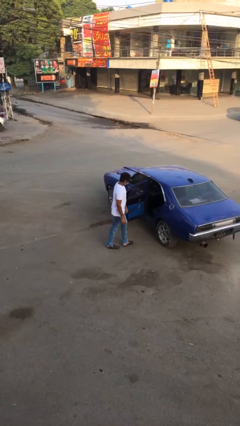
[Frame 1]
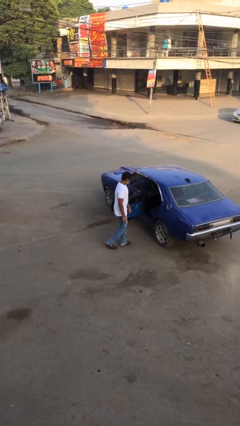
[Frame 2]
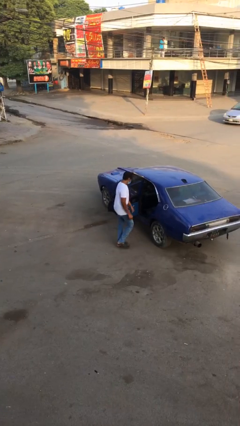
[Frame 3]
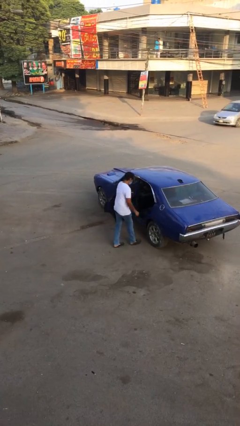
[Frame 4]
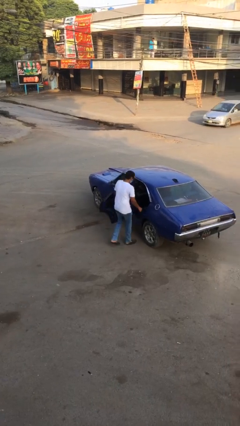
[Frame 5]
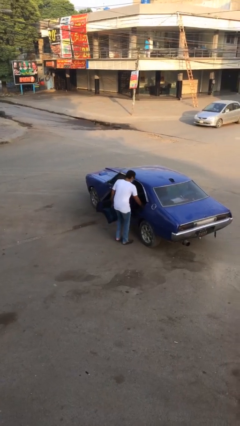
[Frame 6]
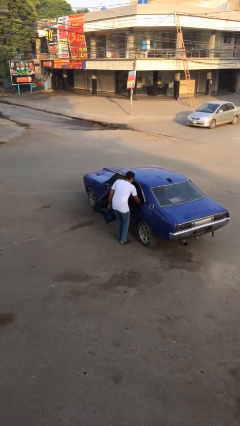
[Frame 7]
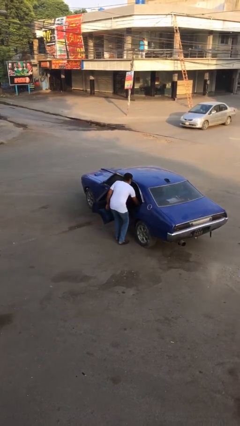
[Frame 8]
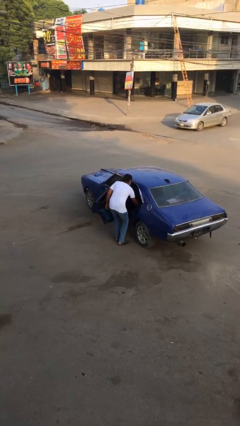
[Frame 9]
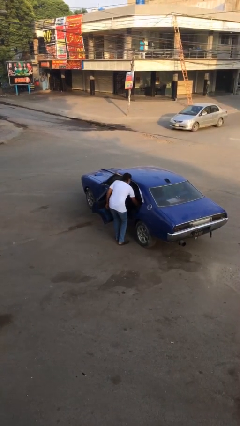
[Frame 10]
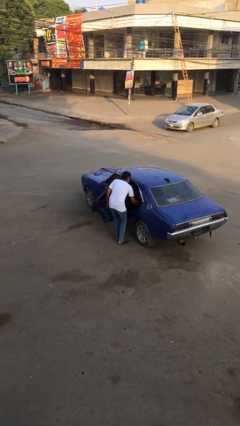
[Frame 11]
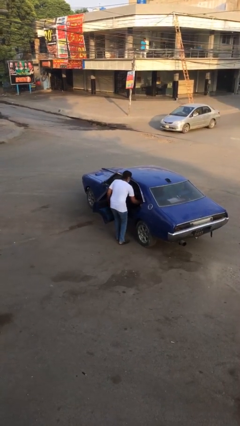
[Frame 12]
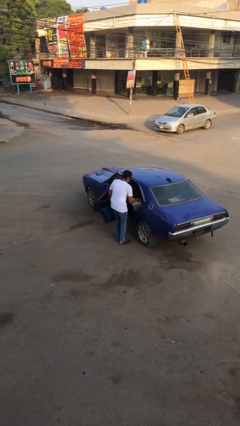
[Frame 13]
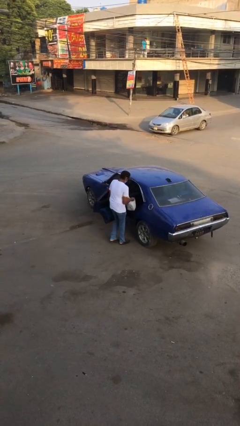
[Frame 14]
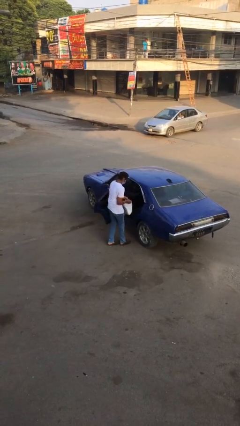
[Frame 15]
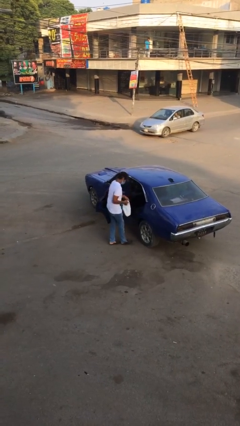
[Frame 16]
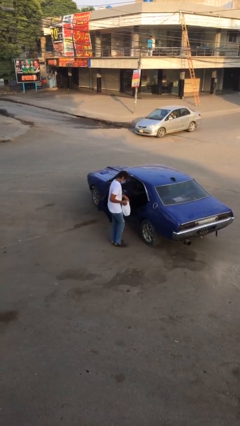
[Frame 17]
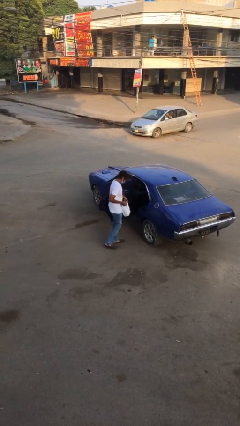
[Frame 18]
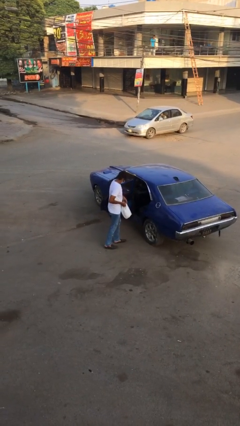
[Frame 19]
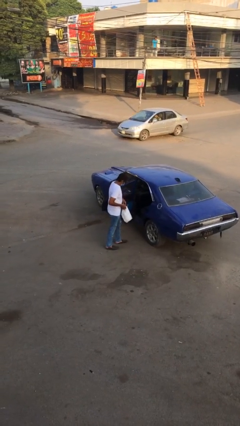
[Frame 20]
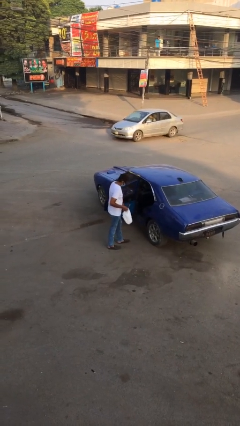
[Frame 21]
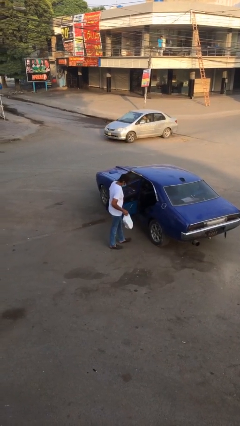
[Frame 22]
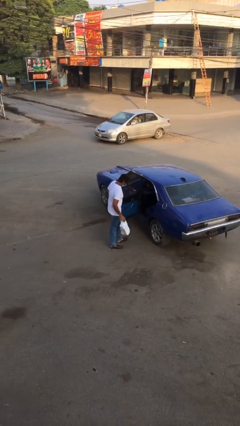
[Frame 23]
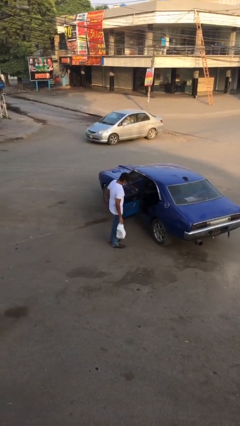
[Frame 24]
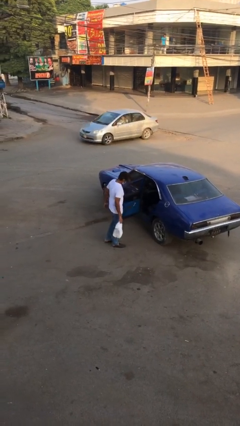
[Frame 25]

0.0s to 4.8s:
person unloads car

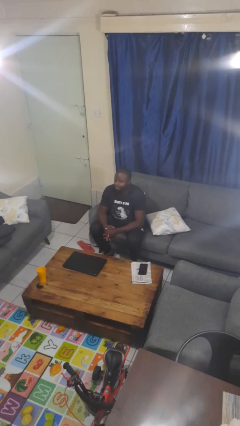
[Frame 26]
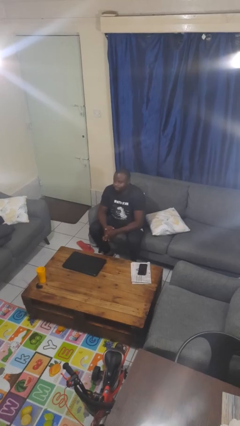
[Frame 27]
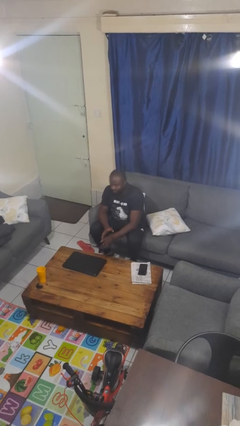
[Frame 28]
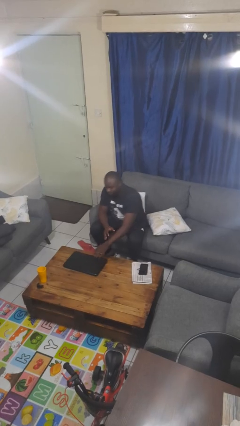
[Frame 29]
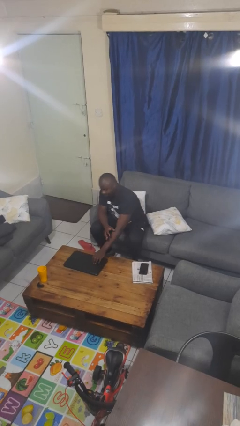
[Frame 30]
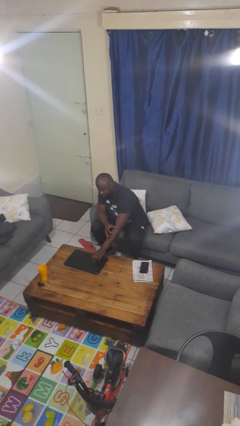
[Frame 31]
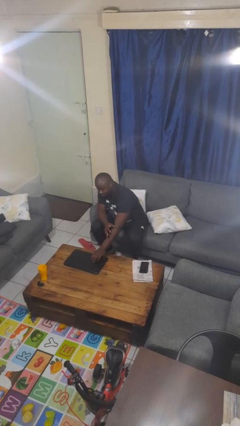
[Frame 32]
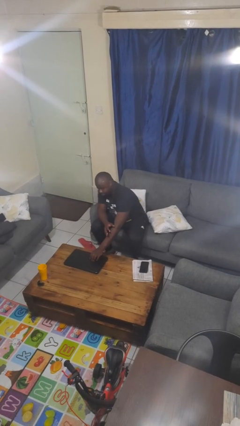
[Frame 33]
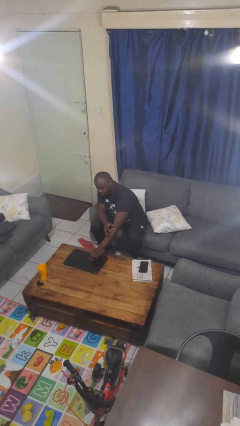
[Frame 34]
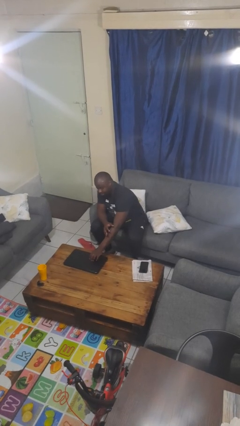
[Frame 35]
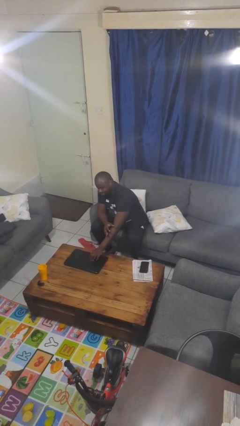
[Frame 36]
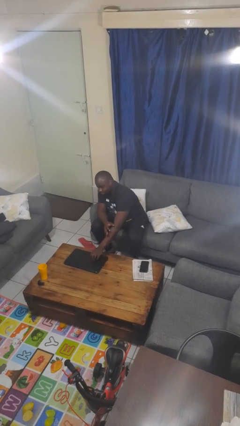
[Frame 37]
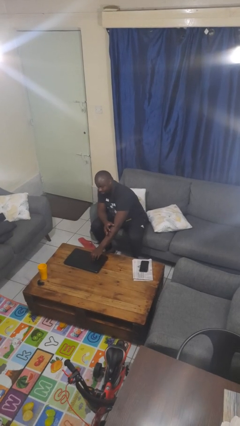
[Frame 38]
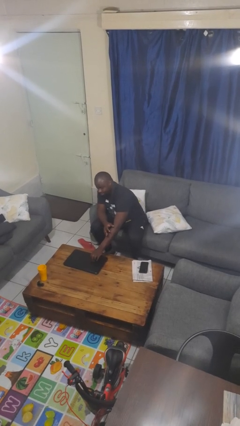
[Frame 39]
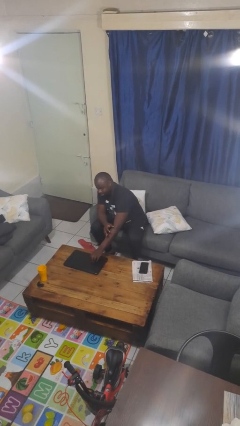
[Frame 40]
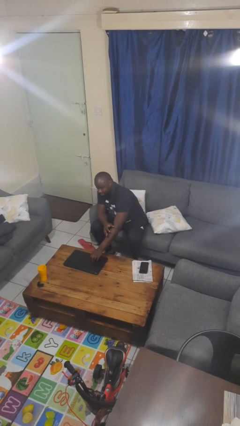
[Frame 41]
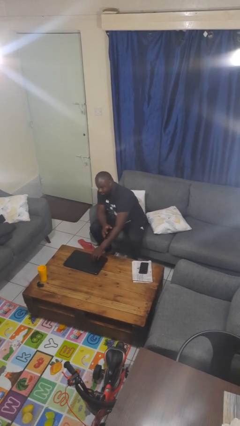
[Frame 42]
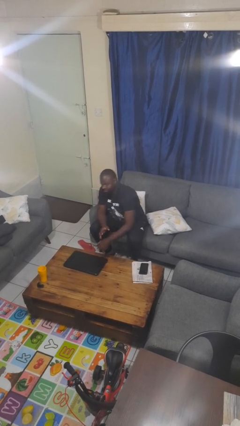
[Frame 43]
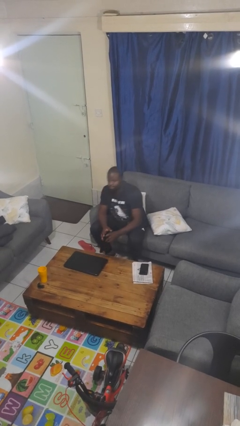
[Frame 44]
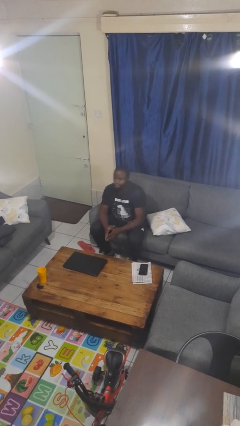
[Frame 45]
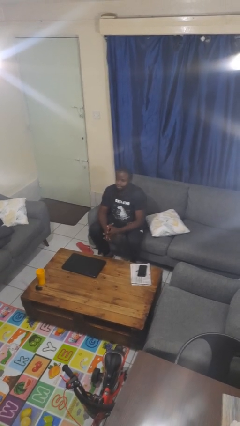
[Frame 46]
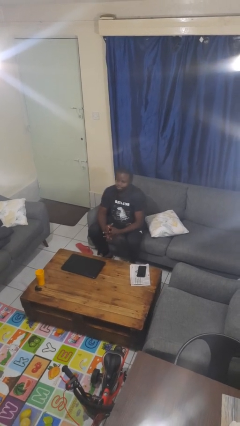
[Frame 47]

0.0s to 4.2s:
person taps object with finger

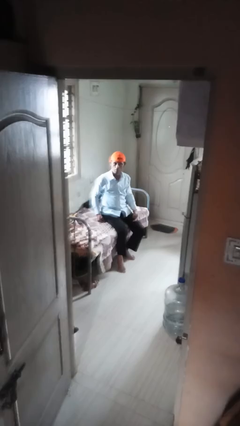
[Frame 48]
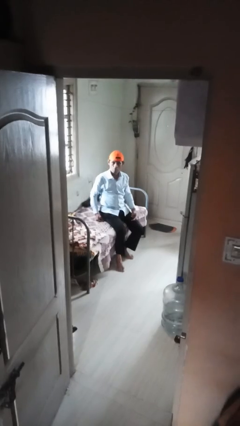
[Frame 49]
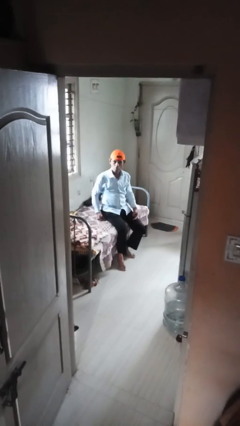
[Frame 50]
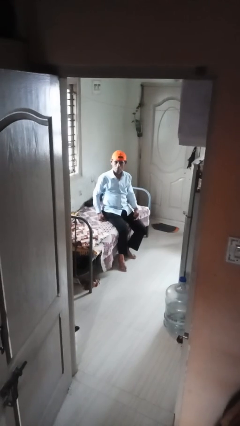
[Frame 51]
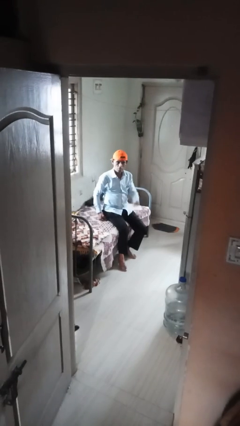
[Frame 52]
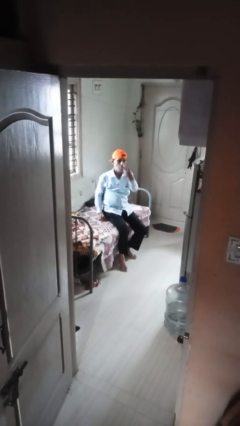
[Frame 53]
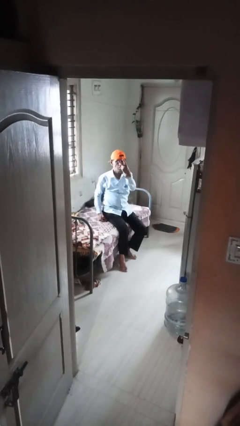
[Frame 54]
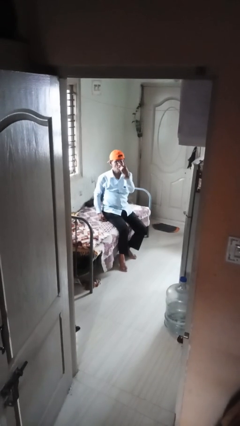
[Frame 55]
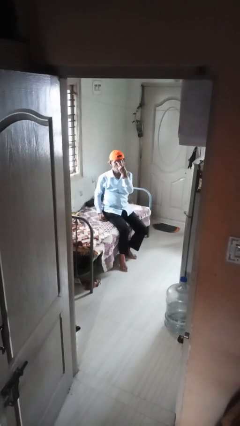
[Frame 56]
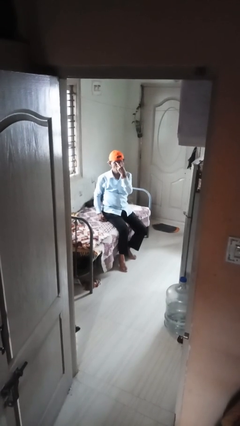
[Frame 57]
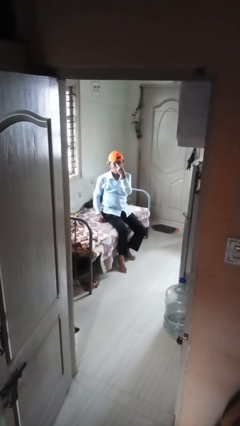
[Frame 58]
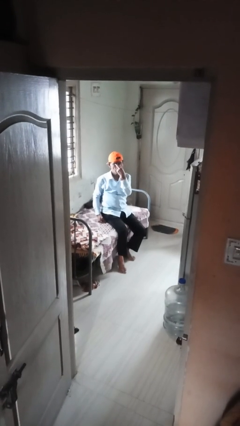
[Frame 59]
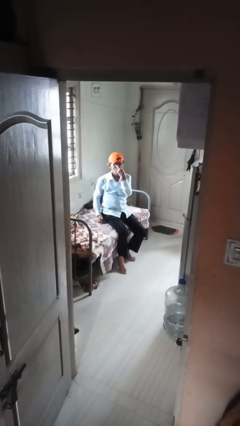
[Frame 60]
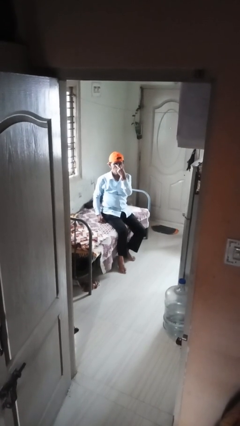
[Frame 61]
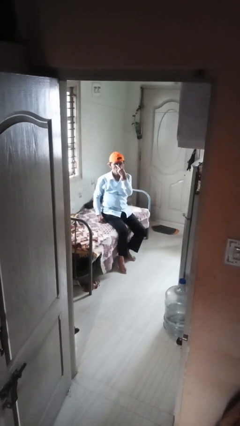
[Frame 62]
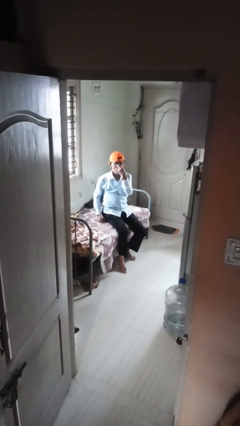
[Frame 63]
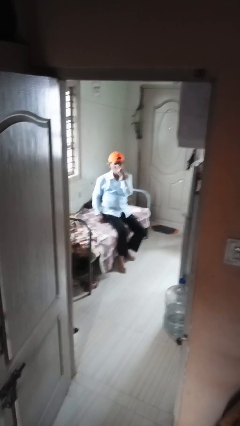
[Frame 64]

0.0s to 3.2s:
person gestures watch closely

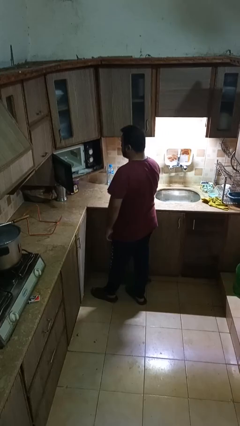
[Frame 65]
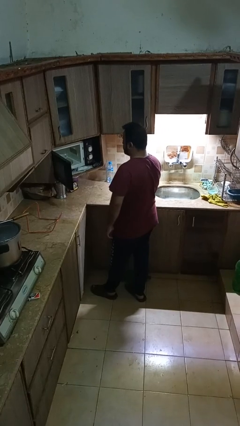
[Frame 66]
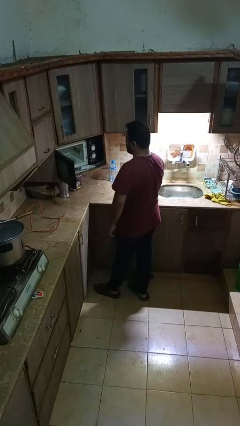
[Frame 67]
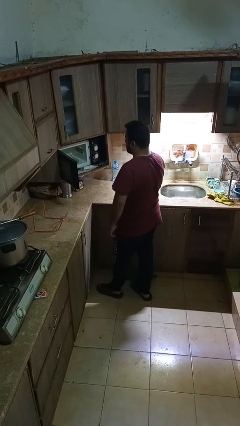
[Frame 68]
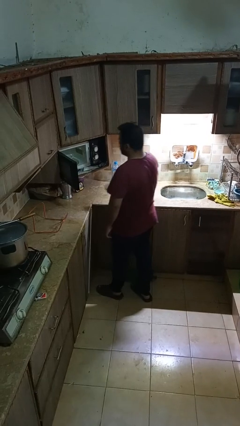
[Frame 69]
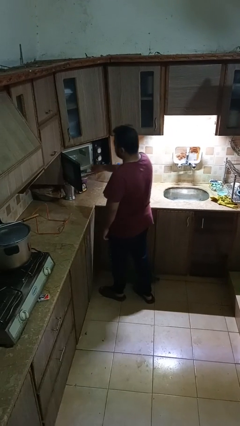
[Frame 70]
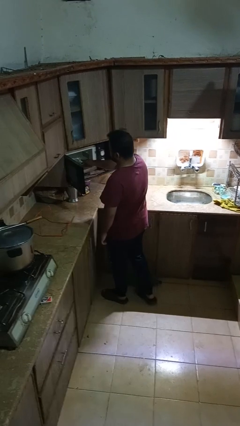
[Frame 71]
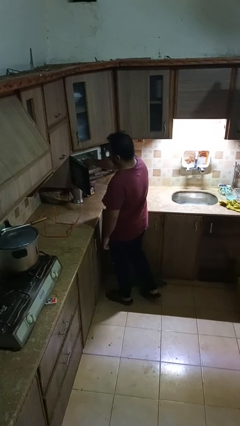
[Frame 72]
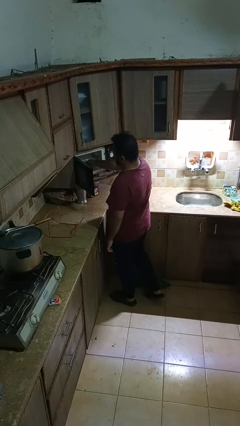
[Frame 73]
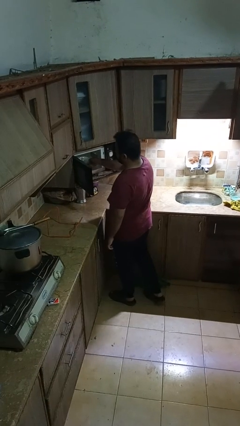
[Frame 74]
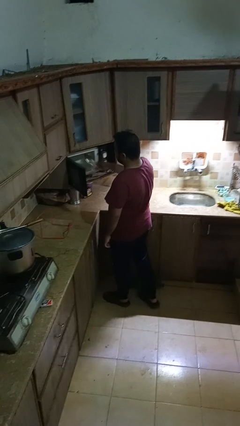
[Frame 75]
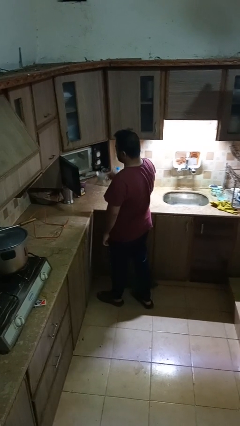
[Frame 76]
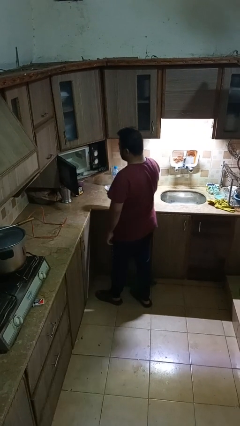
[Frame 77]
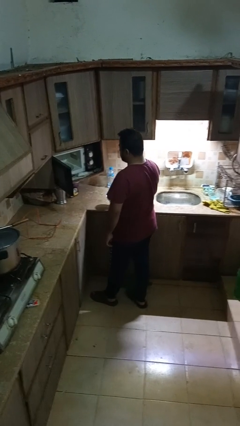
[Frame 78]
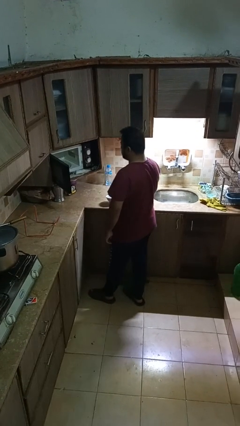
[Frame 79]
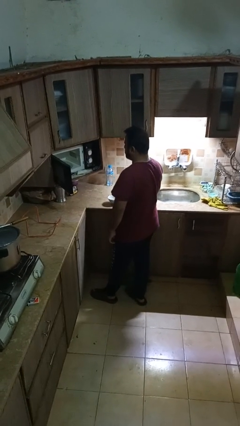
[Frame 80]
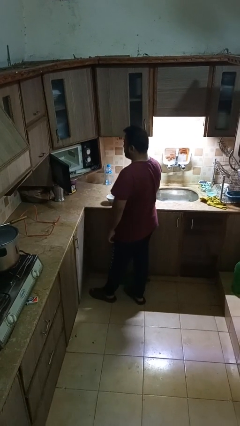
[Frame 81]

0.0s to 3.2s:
person takes object from microwave

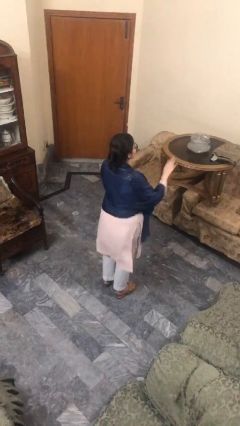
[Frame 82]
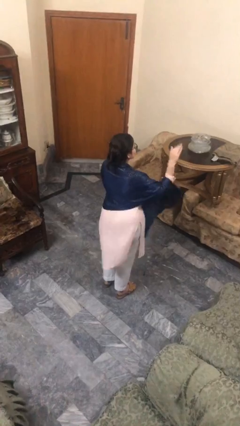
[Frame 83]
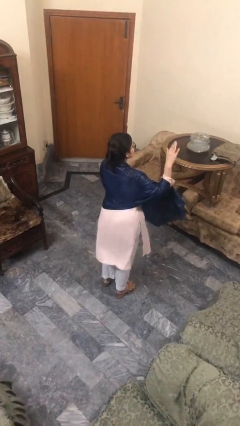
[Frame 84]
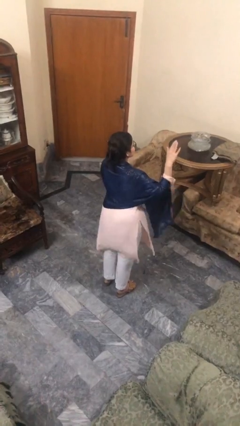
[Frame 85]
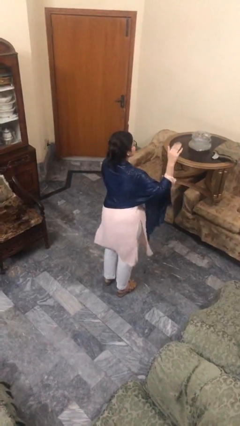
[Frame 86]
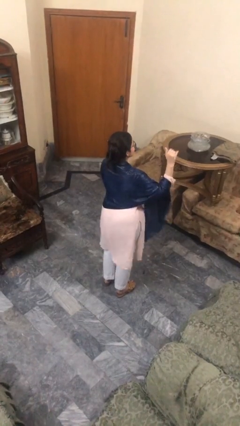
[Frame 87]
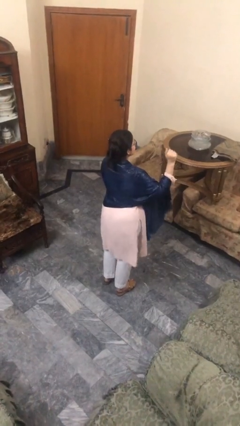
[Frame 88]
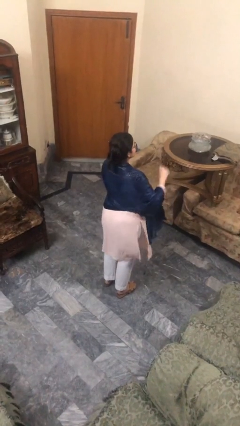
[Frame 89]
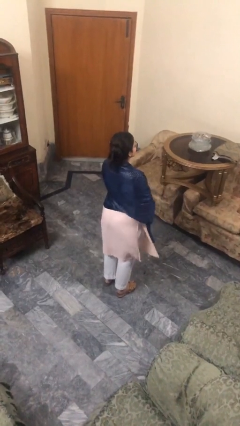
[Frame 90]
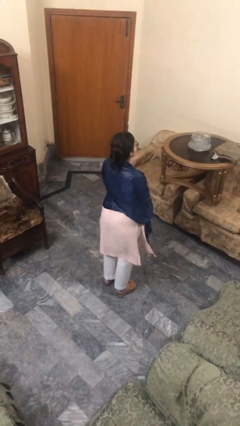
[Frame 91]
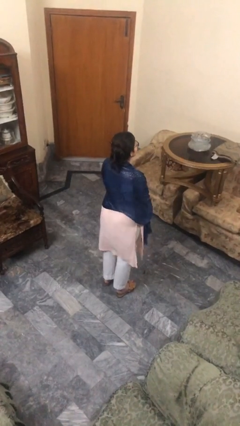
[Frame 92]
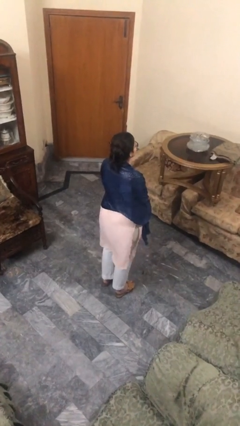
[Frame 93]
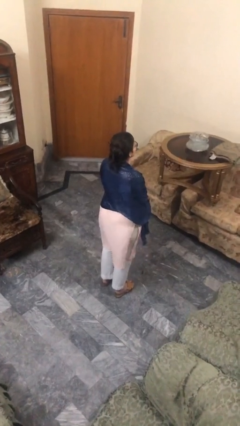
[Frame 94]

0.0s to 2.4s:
person gestures come here
